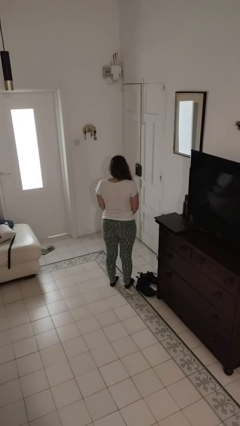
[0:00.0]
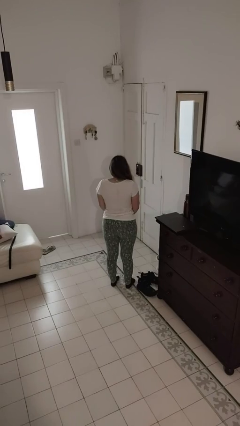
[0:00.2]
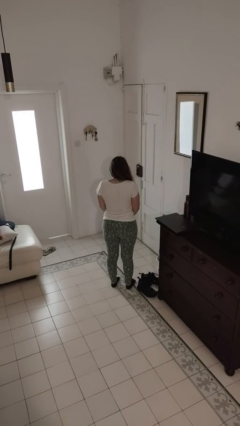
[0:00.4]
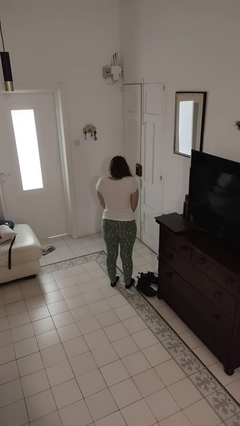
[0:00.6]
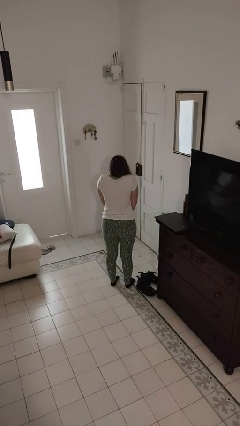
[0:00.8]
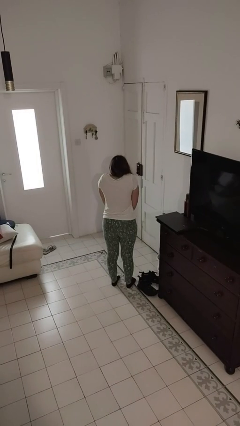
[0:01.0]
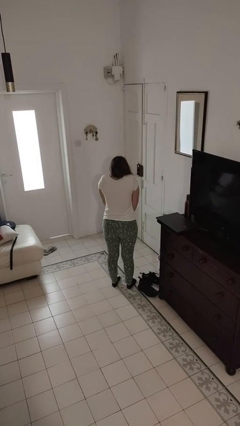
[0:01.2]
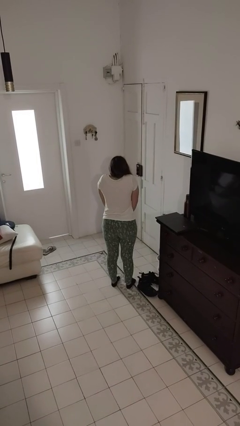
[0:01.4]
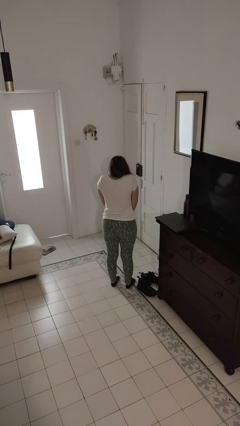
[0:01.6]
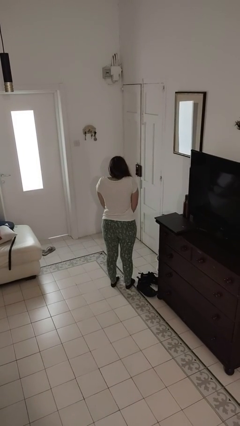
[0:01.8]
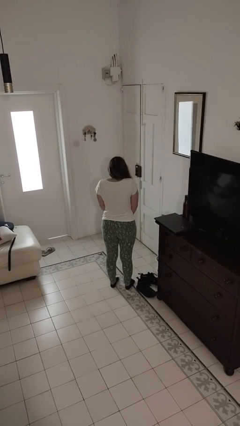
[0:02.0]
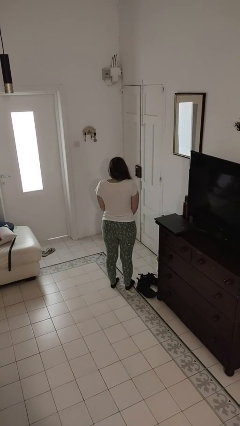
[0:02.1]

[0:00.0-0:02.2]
person shrugs

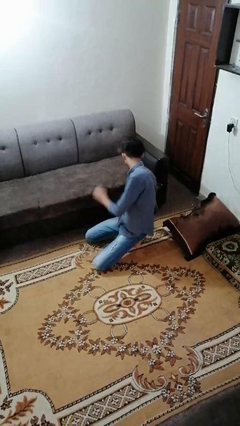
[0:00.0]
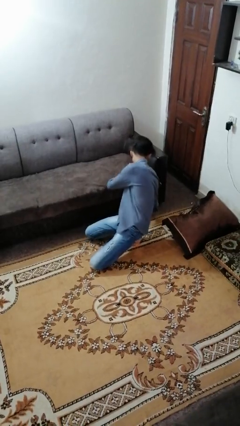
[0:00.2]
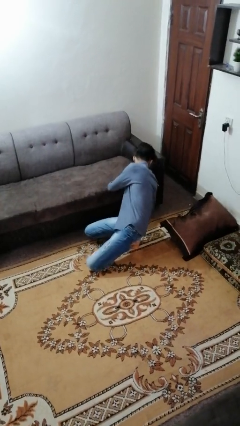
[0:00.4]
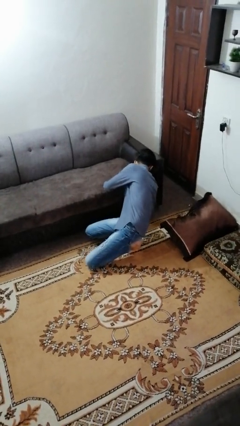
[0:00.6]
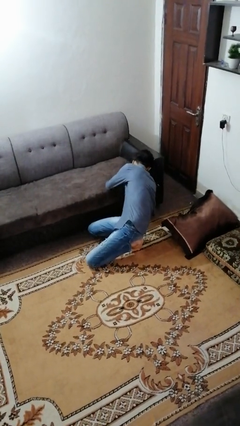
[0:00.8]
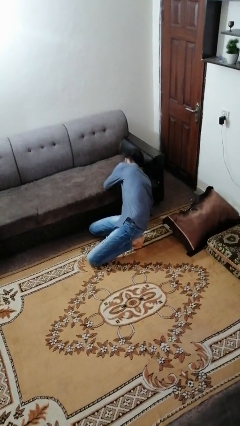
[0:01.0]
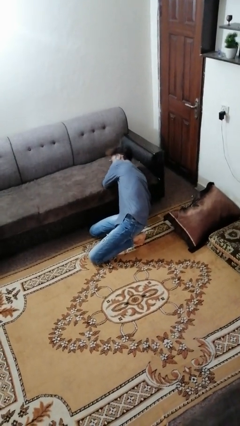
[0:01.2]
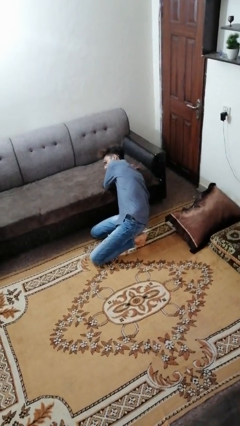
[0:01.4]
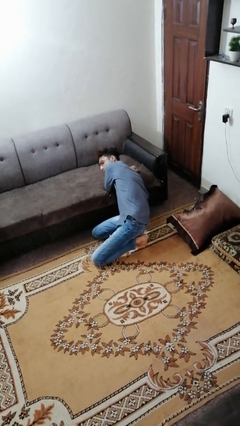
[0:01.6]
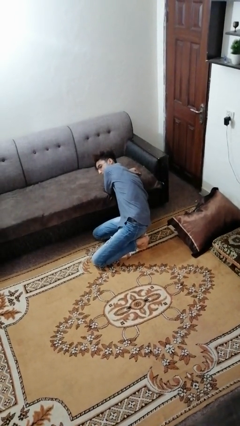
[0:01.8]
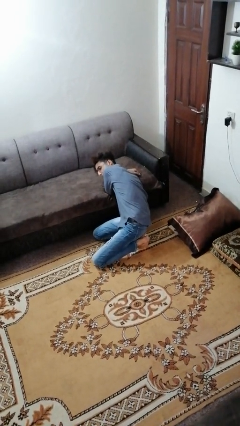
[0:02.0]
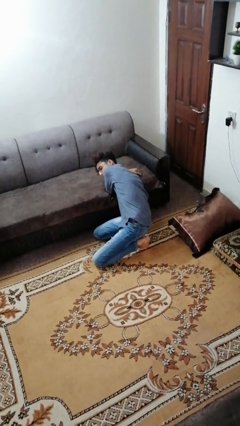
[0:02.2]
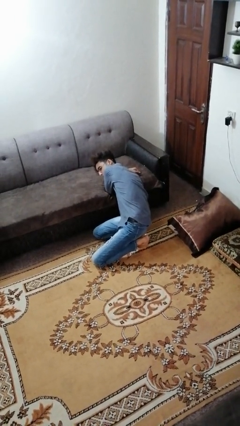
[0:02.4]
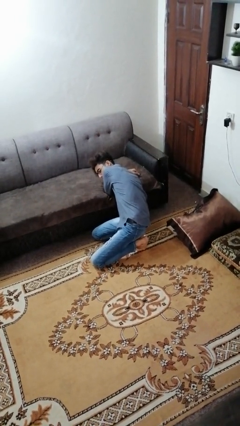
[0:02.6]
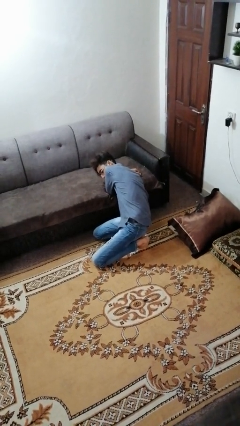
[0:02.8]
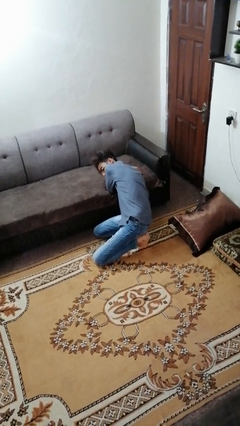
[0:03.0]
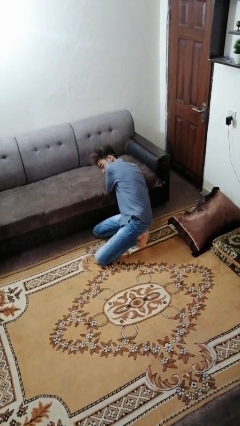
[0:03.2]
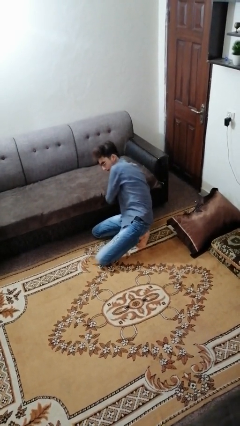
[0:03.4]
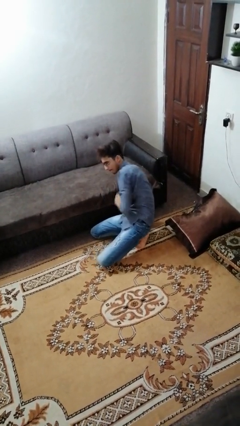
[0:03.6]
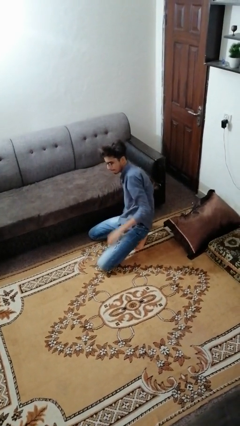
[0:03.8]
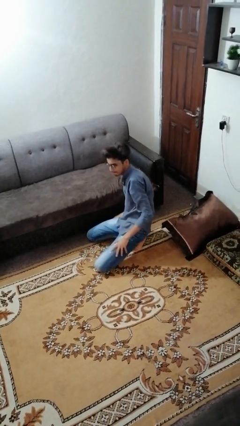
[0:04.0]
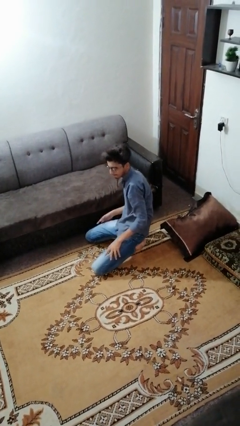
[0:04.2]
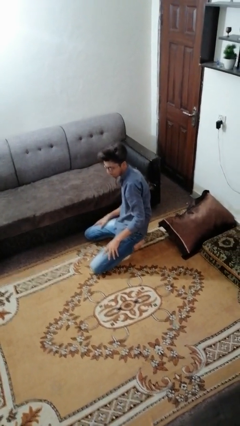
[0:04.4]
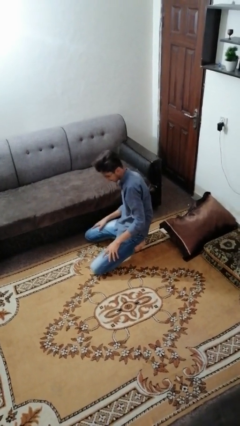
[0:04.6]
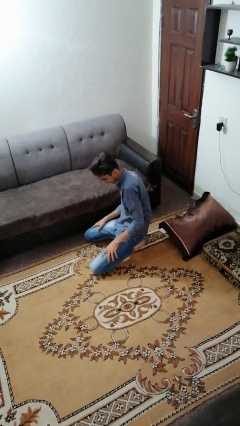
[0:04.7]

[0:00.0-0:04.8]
person searches under couch

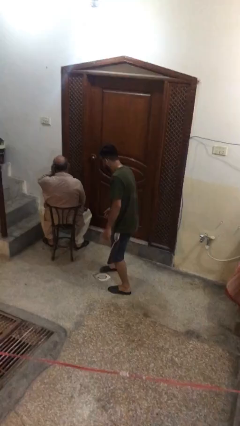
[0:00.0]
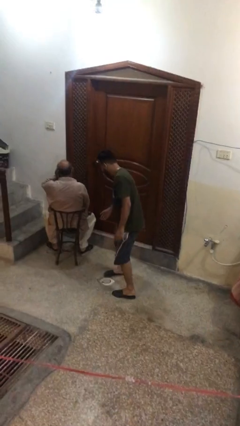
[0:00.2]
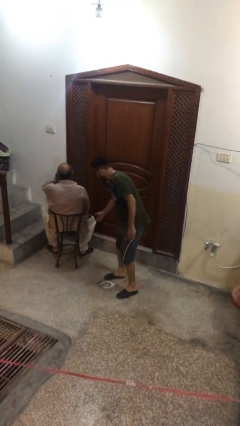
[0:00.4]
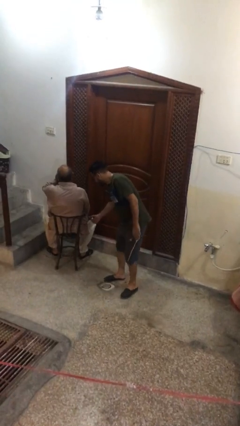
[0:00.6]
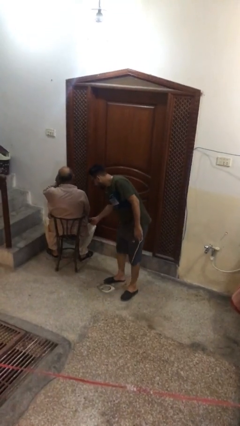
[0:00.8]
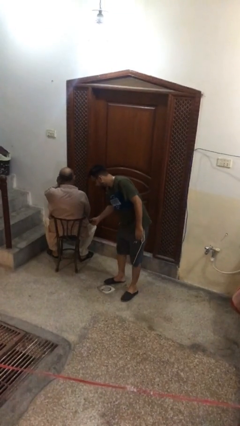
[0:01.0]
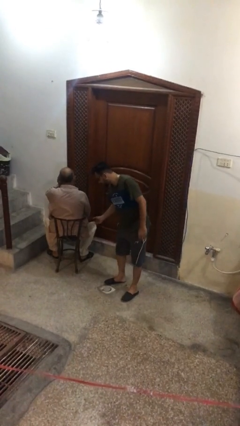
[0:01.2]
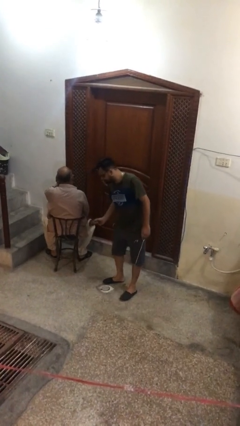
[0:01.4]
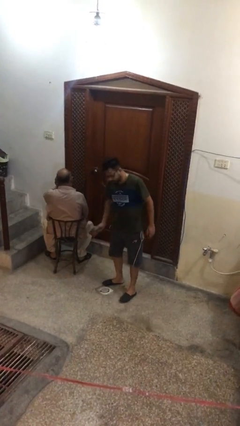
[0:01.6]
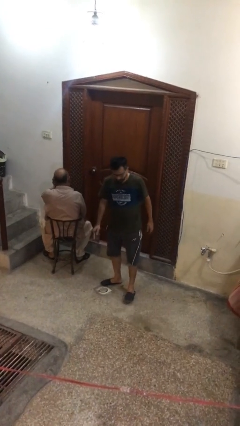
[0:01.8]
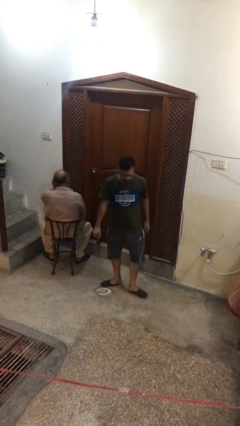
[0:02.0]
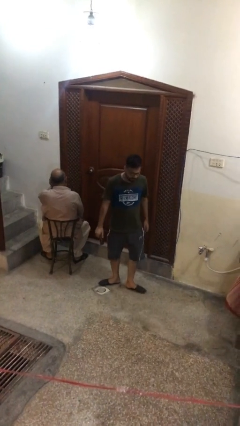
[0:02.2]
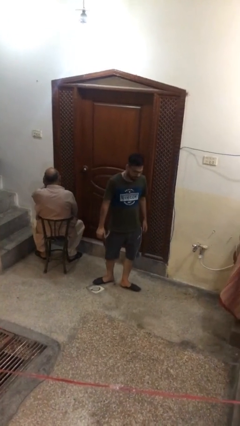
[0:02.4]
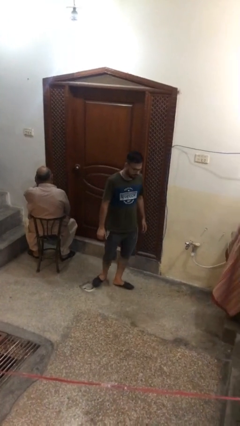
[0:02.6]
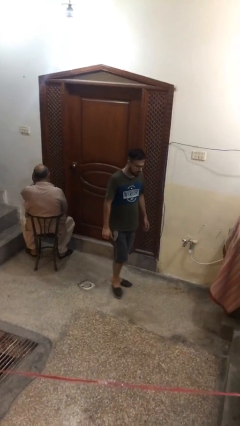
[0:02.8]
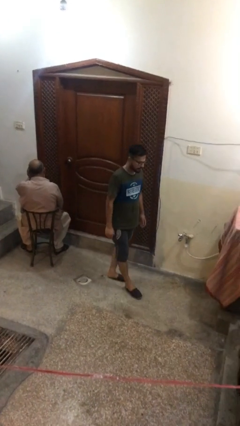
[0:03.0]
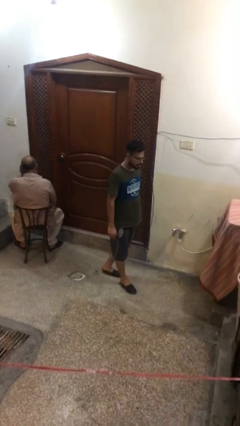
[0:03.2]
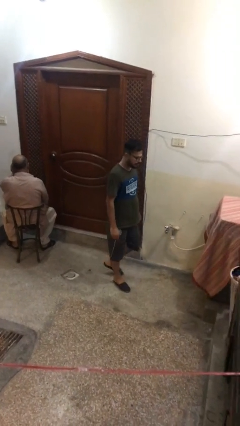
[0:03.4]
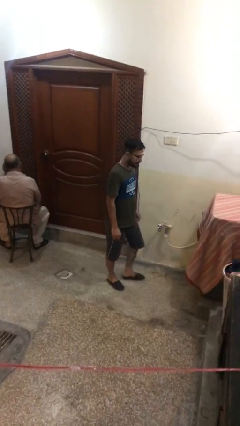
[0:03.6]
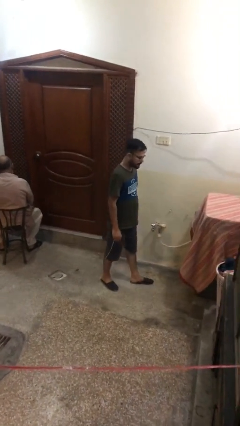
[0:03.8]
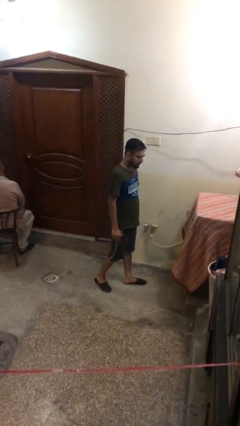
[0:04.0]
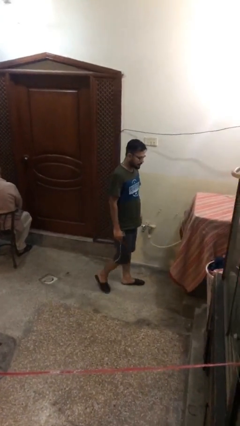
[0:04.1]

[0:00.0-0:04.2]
person steals object from person

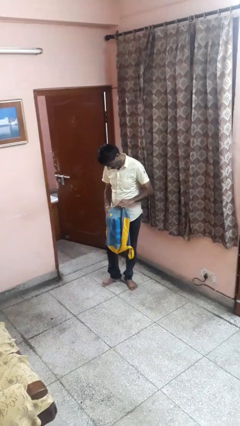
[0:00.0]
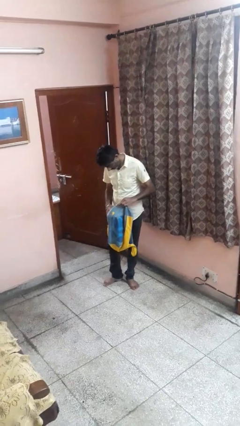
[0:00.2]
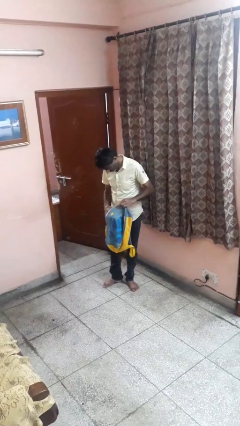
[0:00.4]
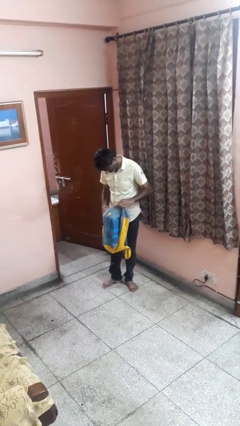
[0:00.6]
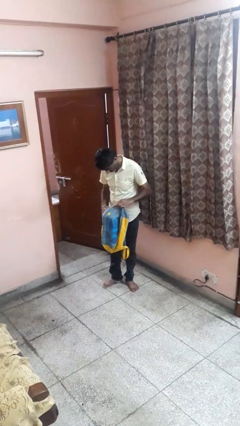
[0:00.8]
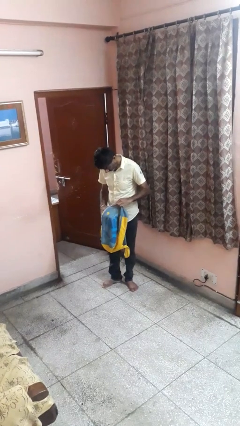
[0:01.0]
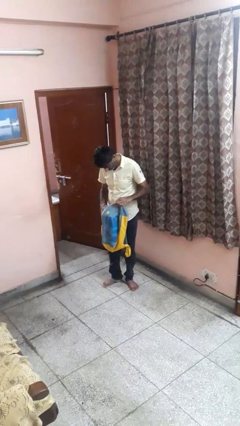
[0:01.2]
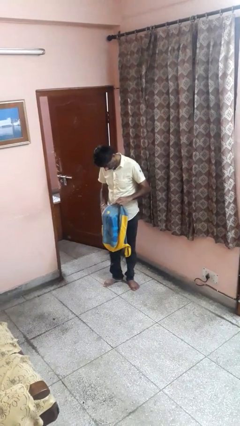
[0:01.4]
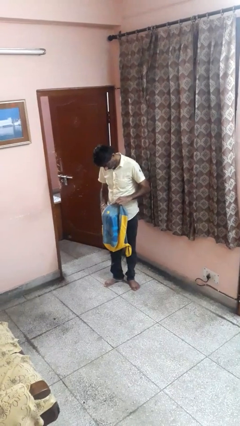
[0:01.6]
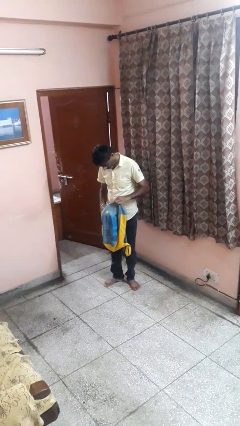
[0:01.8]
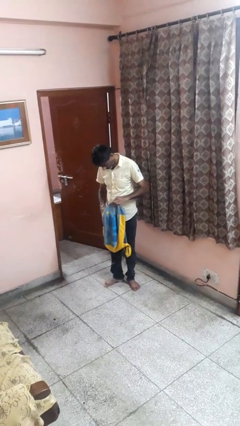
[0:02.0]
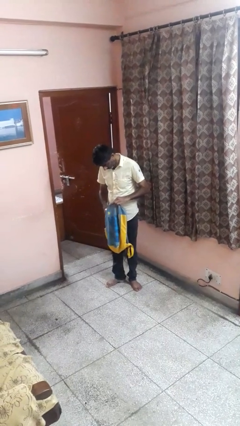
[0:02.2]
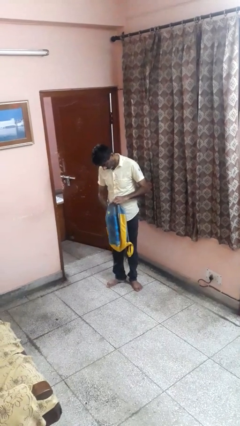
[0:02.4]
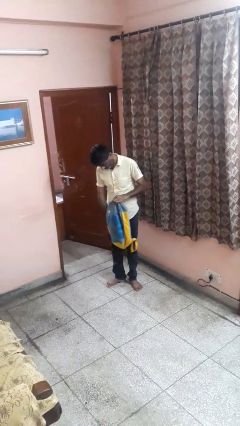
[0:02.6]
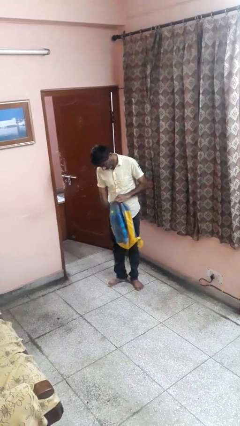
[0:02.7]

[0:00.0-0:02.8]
person searches in backpack

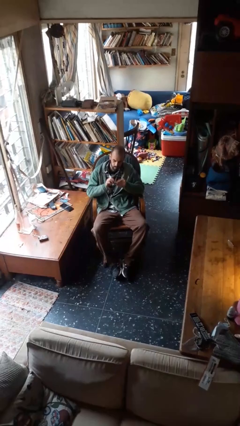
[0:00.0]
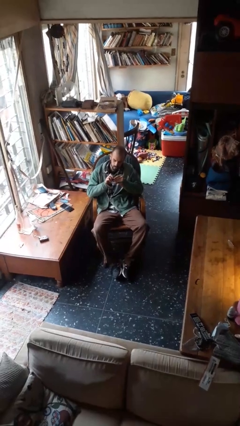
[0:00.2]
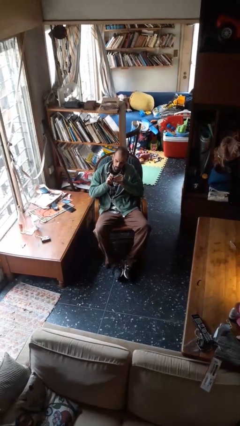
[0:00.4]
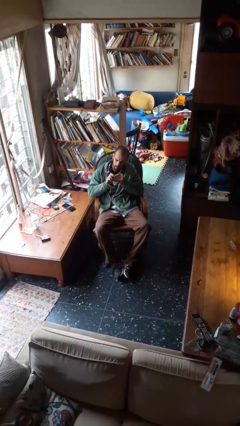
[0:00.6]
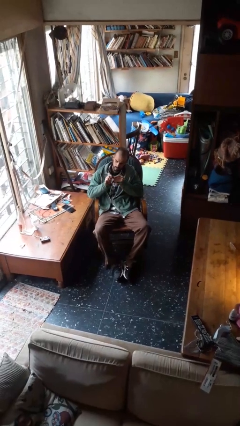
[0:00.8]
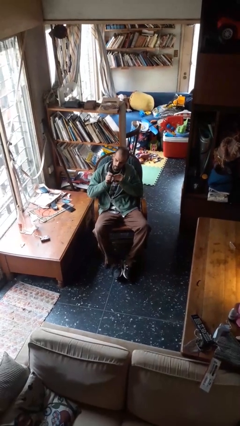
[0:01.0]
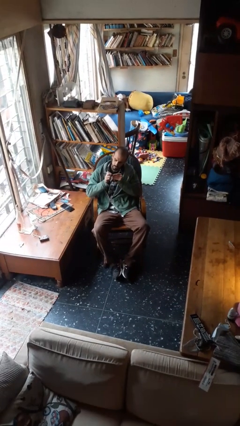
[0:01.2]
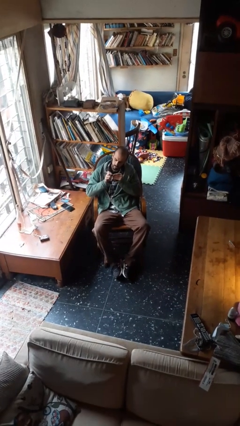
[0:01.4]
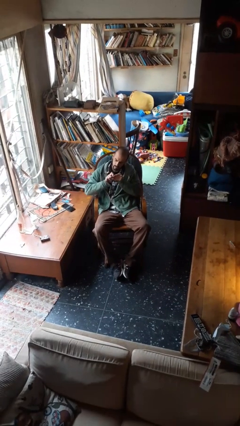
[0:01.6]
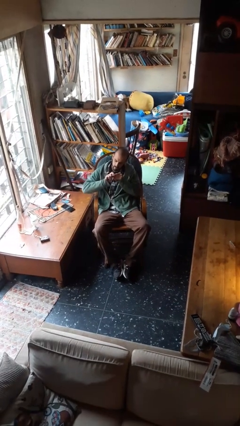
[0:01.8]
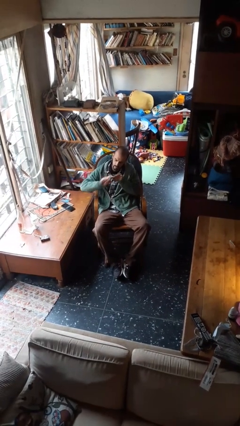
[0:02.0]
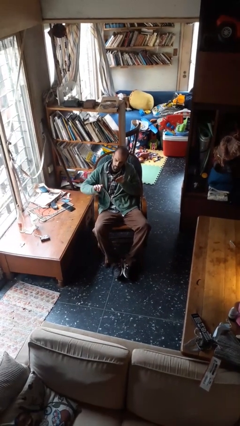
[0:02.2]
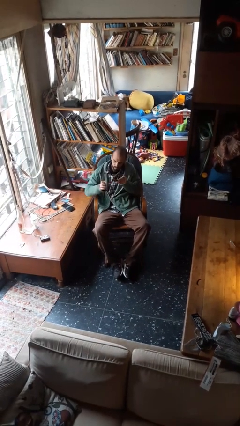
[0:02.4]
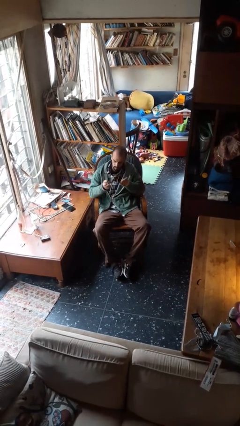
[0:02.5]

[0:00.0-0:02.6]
person files fingernails

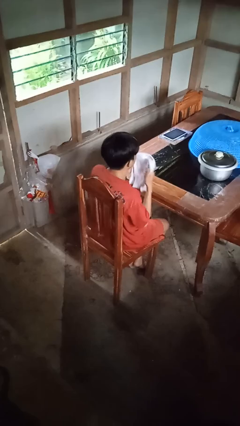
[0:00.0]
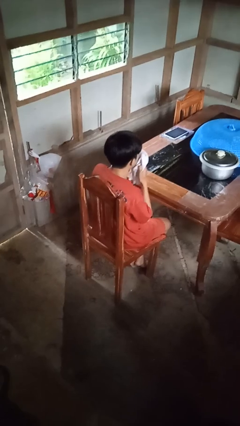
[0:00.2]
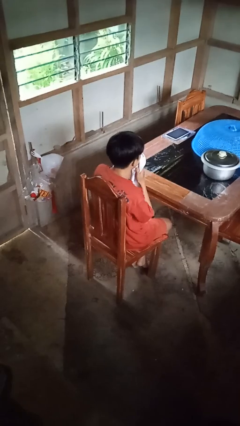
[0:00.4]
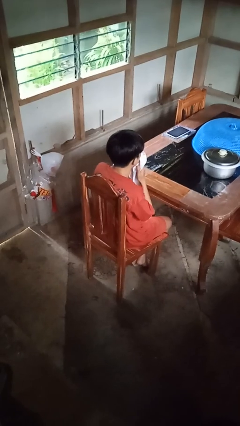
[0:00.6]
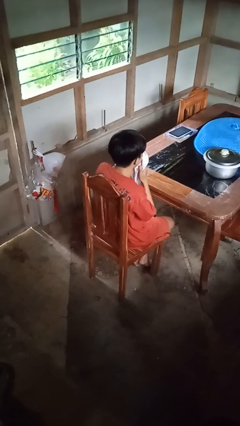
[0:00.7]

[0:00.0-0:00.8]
person wipes mouth with napkin
